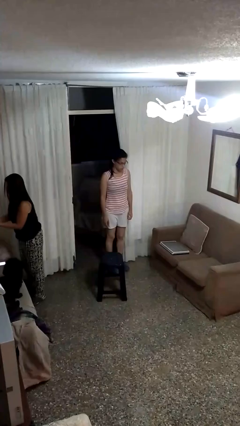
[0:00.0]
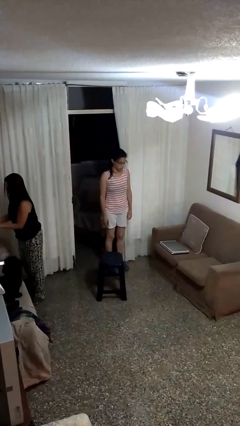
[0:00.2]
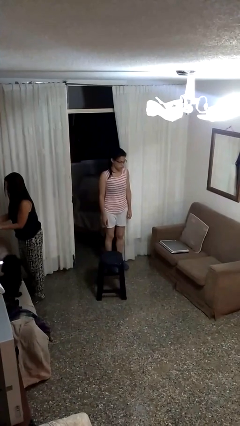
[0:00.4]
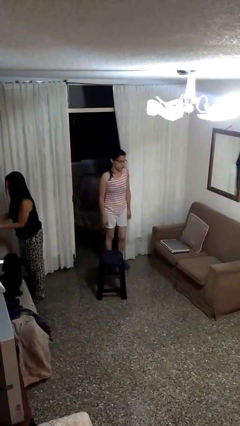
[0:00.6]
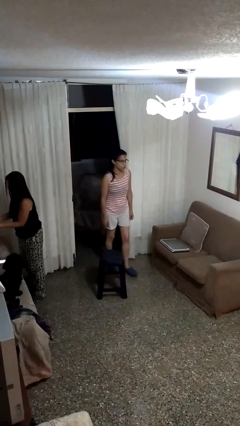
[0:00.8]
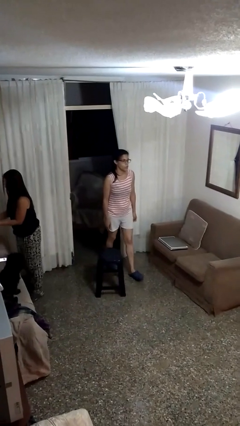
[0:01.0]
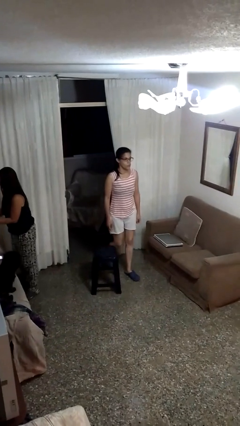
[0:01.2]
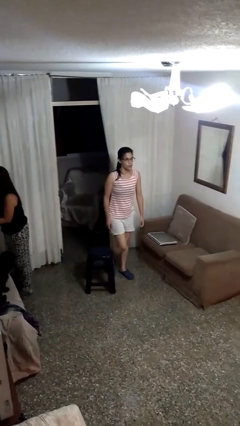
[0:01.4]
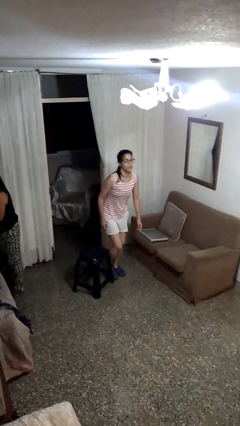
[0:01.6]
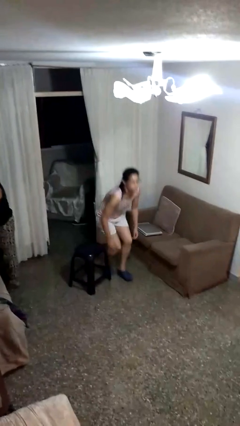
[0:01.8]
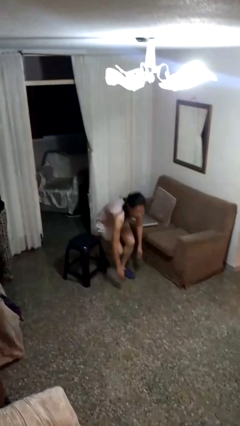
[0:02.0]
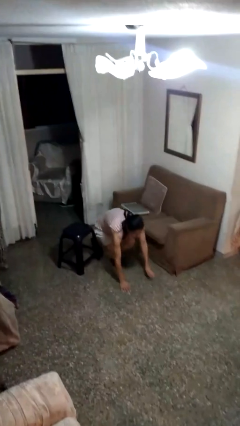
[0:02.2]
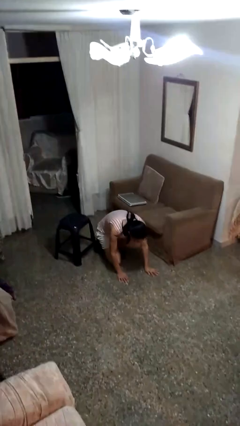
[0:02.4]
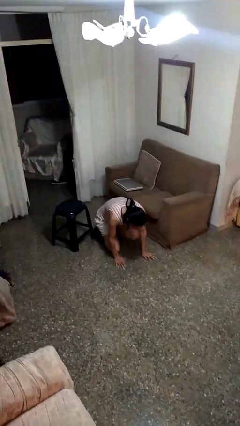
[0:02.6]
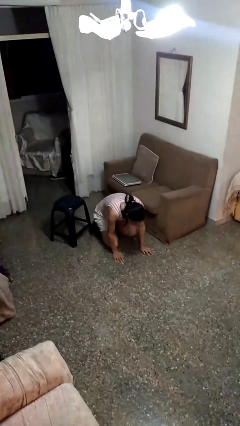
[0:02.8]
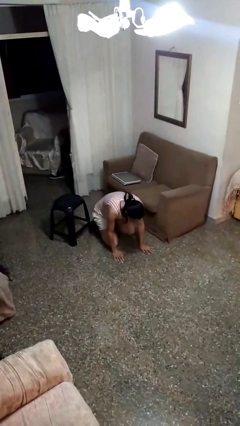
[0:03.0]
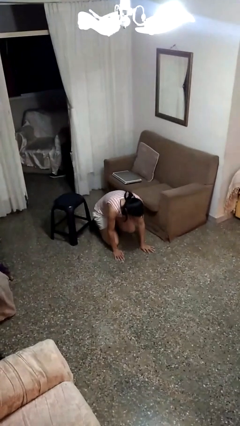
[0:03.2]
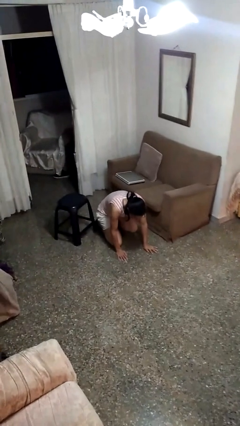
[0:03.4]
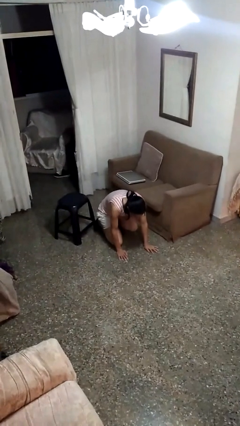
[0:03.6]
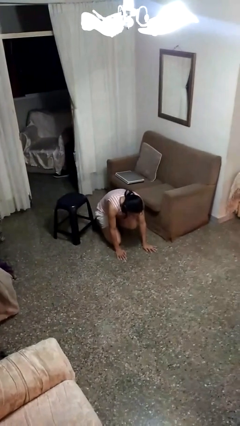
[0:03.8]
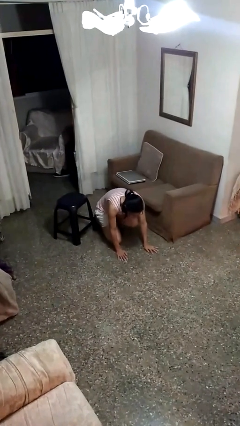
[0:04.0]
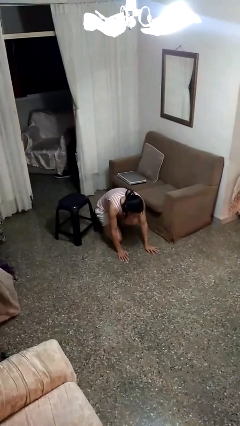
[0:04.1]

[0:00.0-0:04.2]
person trips on object on floor

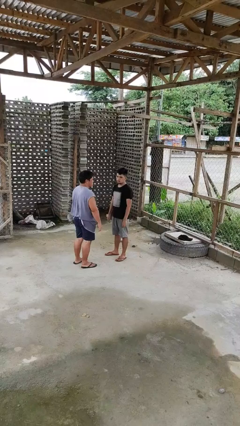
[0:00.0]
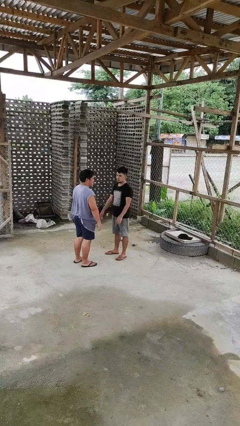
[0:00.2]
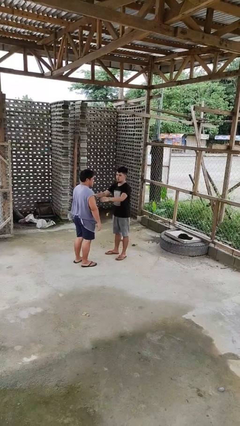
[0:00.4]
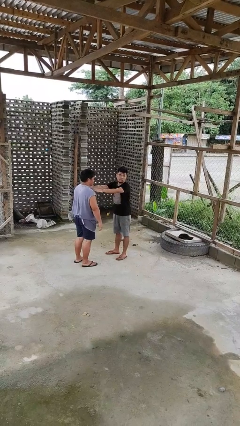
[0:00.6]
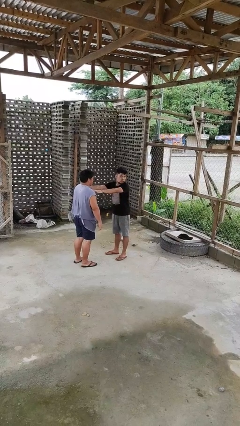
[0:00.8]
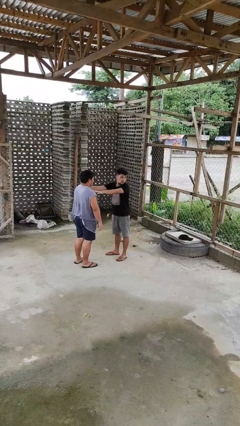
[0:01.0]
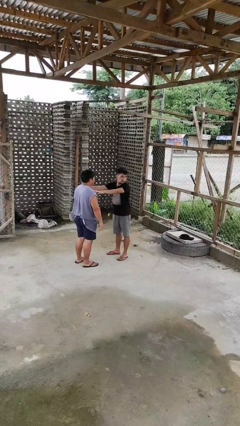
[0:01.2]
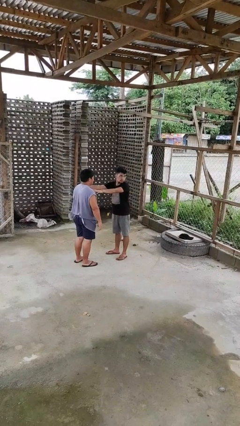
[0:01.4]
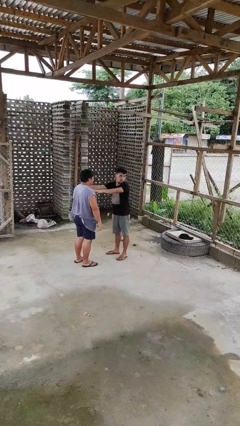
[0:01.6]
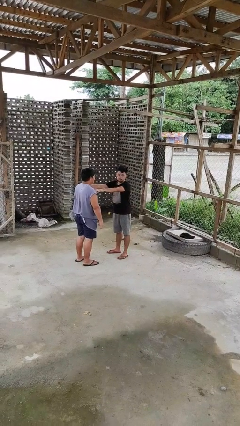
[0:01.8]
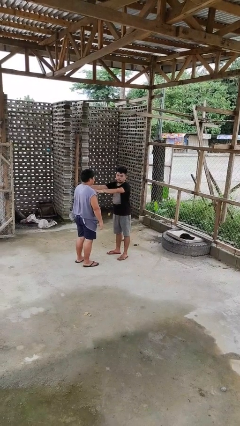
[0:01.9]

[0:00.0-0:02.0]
person grabs person by shoulder

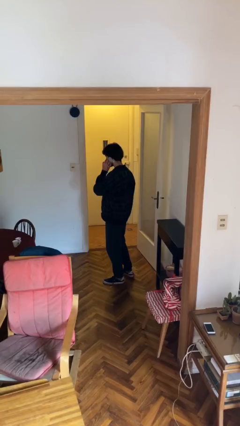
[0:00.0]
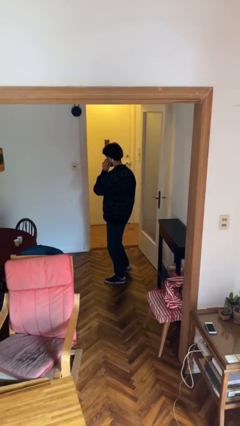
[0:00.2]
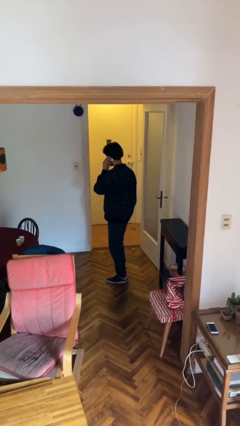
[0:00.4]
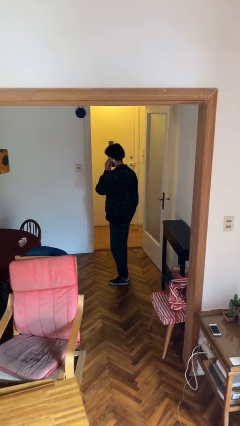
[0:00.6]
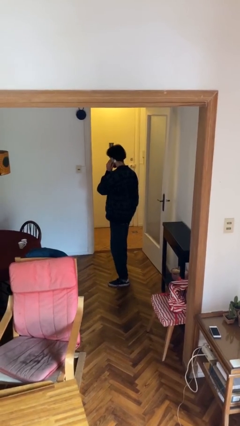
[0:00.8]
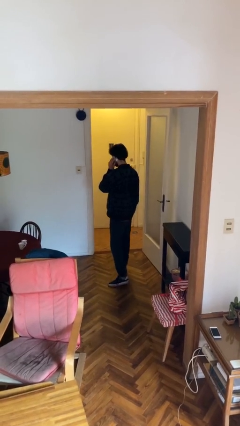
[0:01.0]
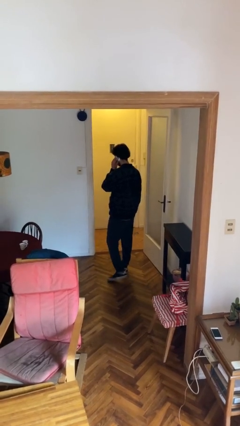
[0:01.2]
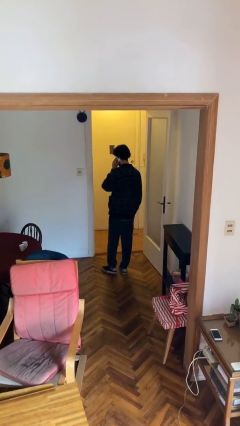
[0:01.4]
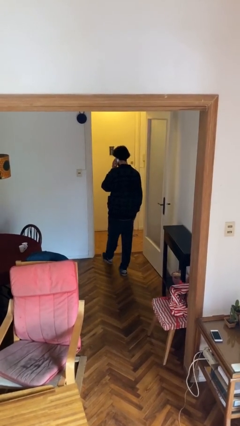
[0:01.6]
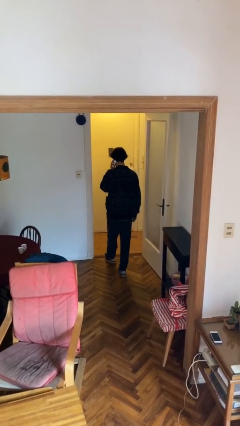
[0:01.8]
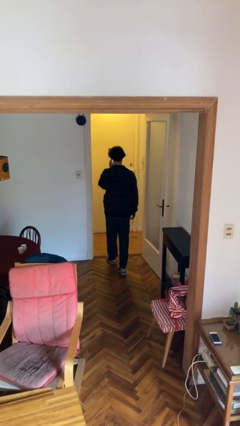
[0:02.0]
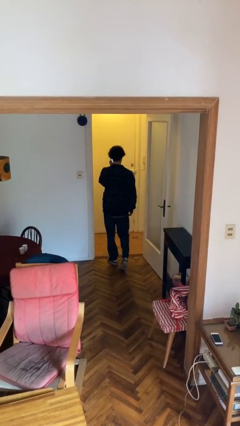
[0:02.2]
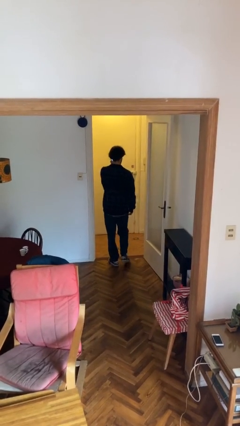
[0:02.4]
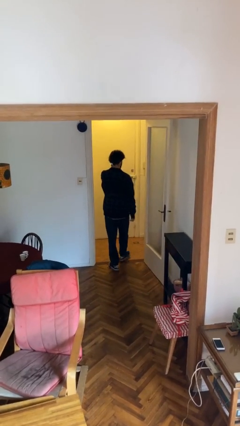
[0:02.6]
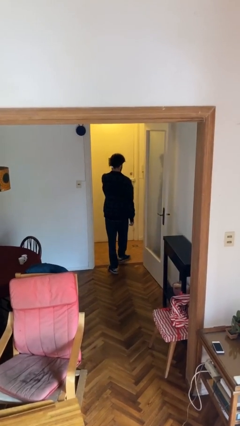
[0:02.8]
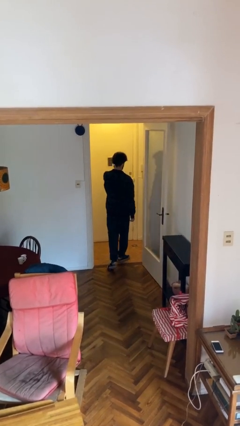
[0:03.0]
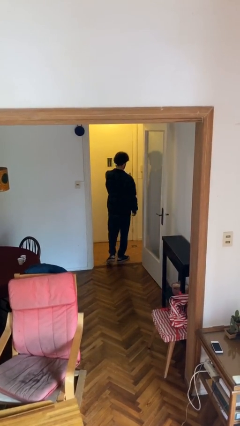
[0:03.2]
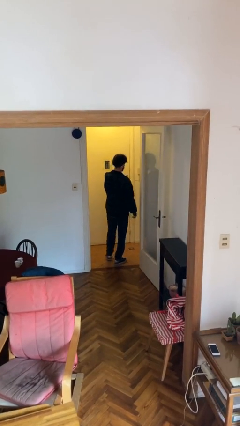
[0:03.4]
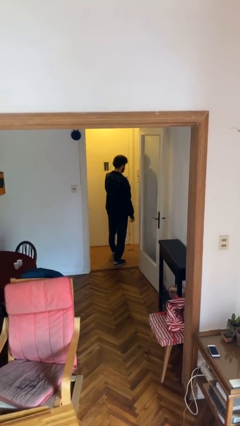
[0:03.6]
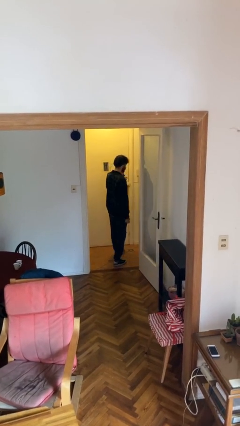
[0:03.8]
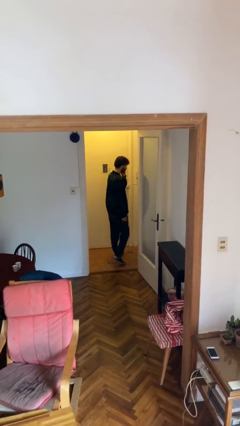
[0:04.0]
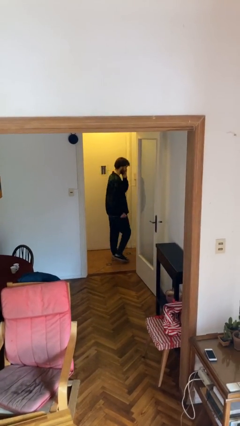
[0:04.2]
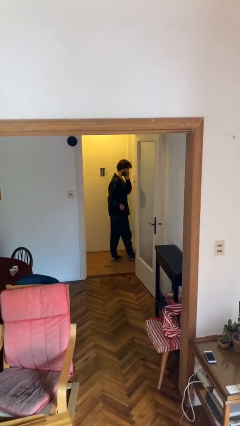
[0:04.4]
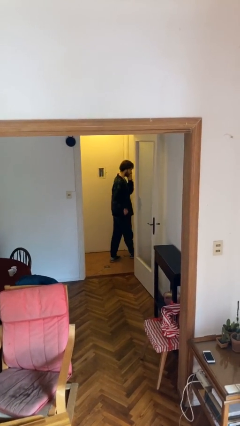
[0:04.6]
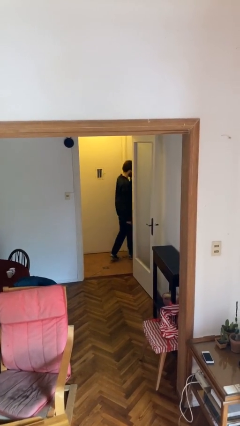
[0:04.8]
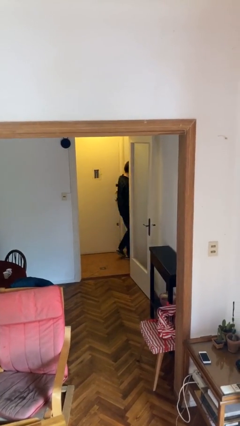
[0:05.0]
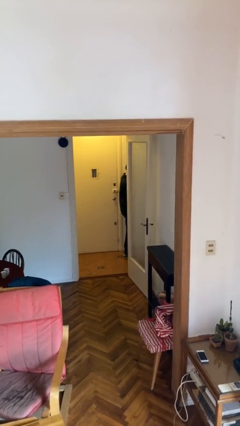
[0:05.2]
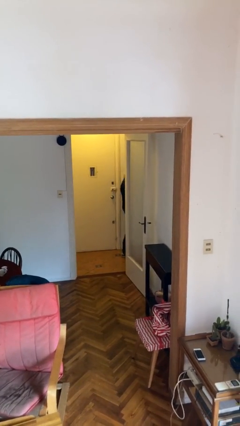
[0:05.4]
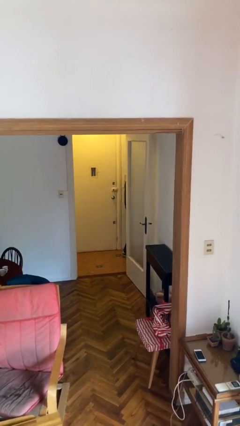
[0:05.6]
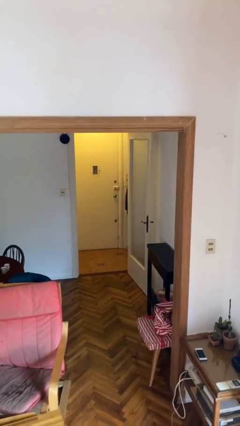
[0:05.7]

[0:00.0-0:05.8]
person exits scene through structure

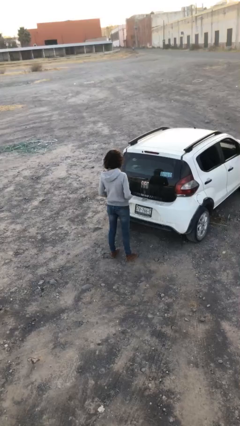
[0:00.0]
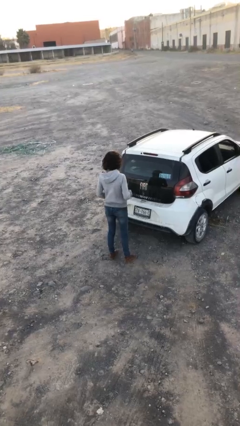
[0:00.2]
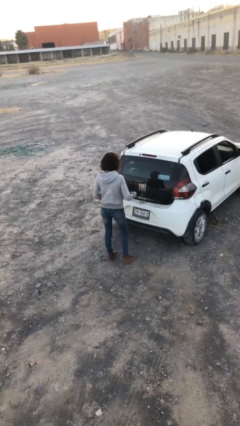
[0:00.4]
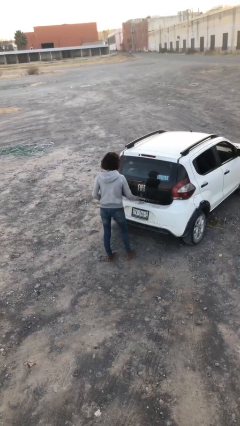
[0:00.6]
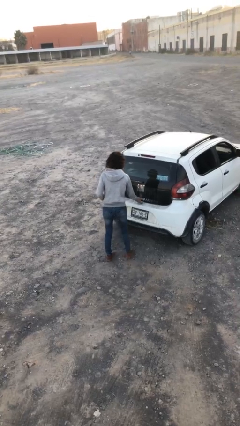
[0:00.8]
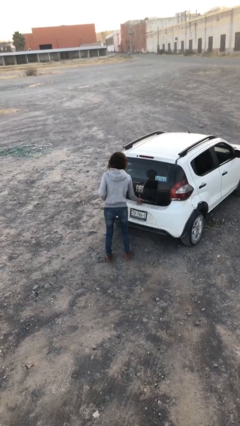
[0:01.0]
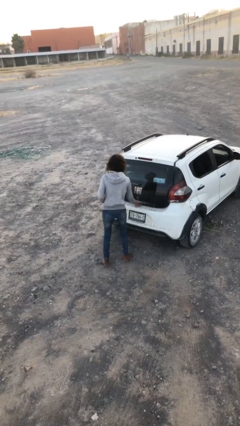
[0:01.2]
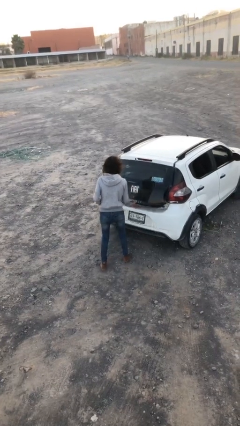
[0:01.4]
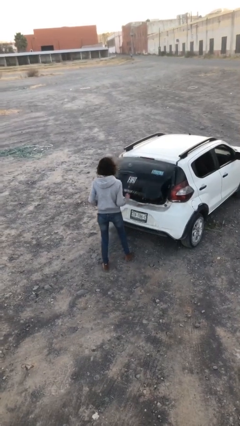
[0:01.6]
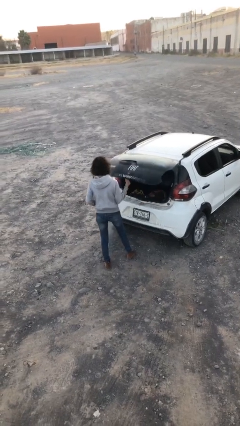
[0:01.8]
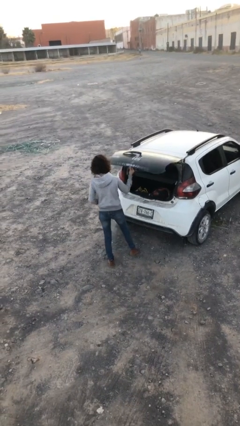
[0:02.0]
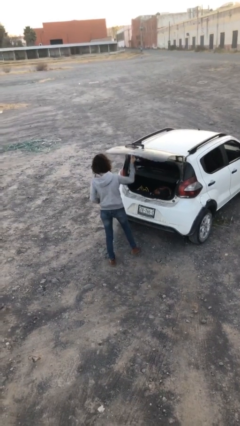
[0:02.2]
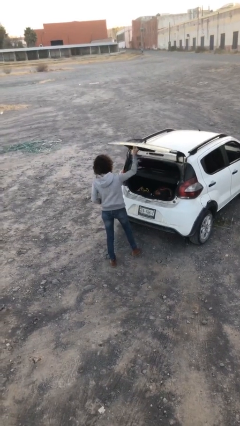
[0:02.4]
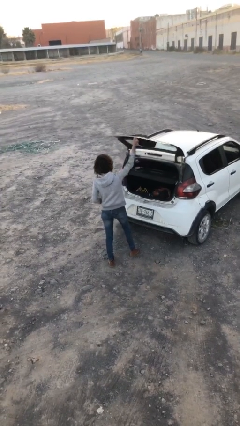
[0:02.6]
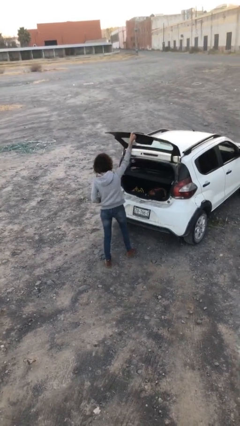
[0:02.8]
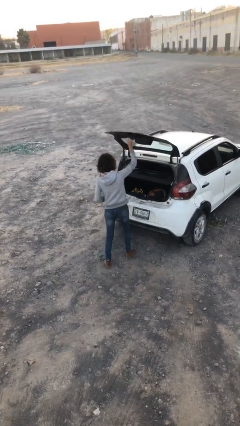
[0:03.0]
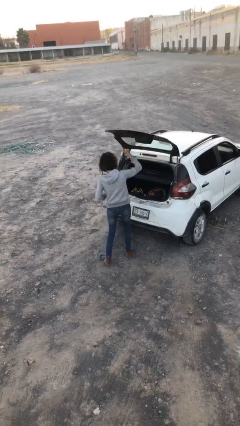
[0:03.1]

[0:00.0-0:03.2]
person opens car trunk

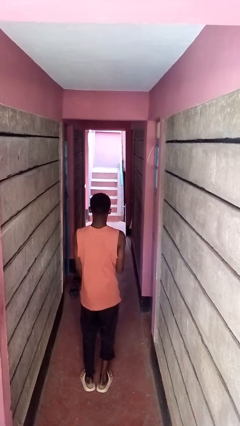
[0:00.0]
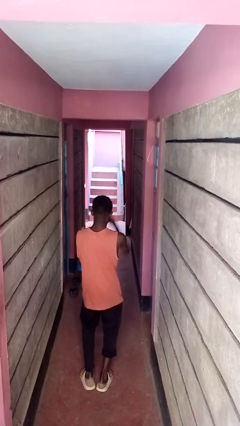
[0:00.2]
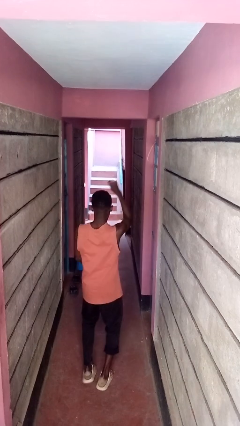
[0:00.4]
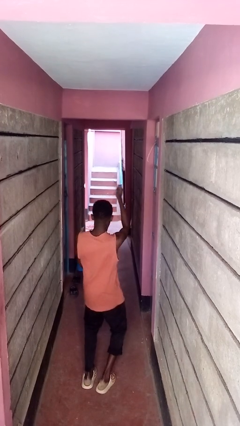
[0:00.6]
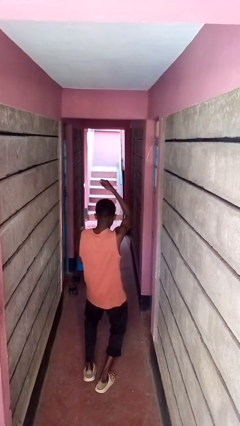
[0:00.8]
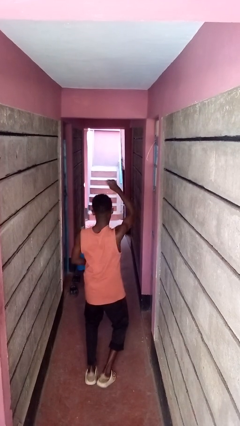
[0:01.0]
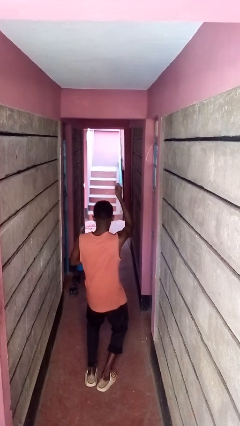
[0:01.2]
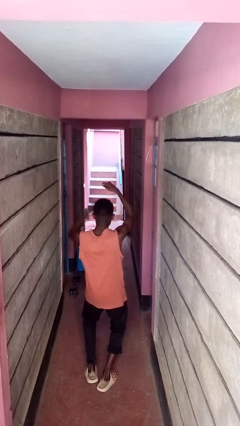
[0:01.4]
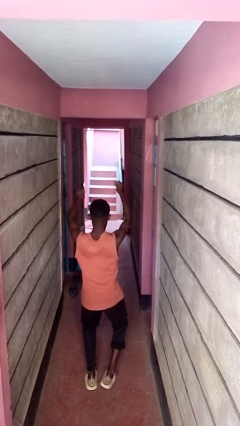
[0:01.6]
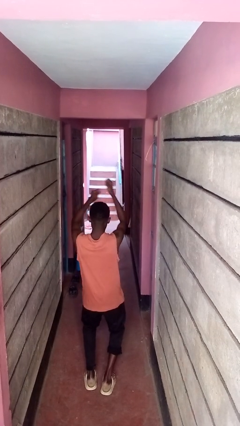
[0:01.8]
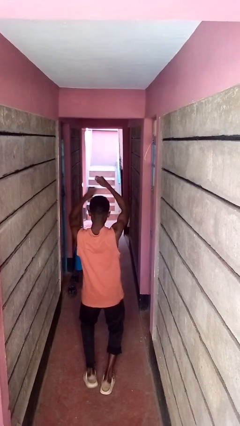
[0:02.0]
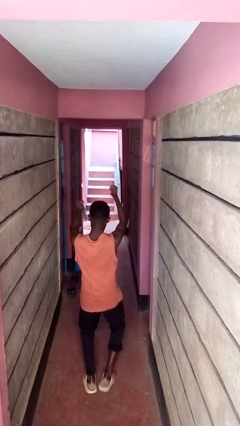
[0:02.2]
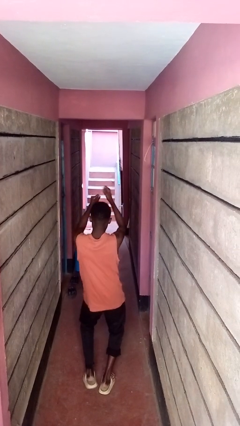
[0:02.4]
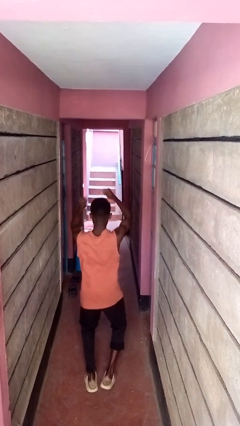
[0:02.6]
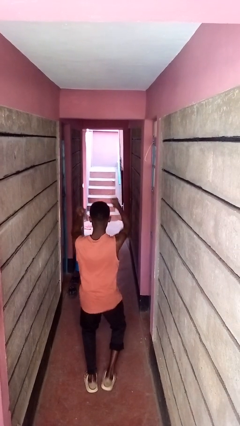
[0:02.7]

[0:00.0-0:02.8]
person dances in place
